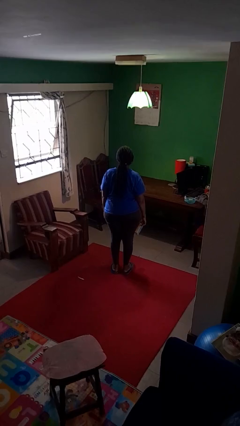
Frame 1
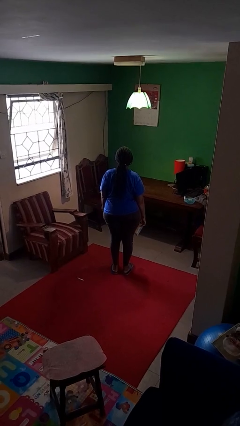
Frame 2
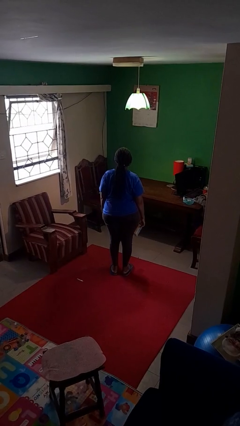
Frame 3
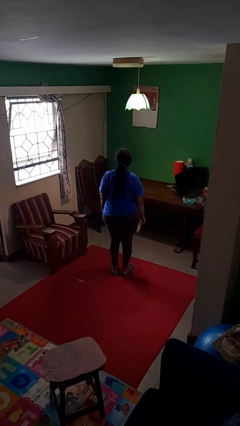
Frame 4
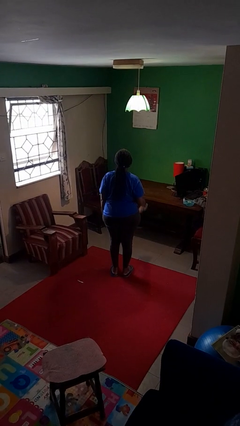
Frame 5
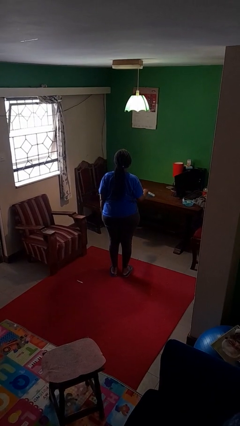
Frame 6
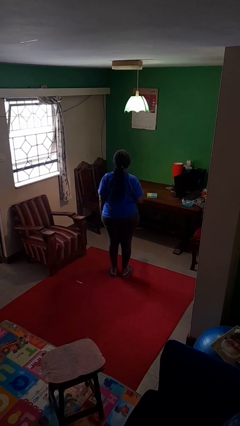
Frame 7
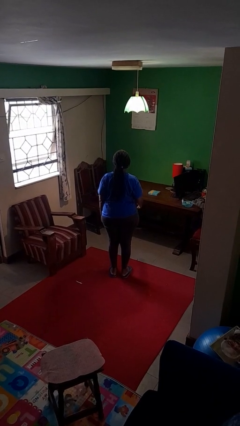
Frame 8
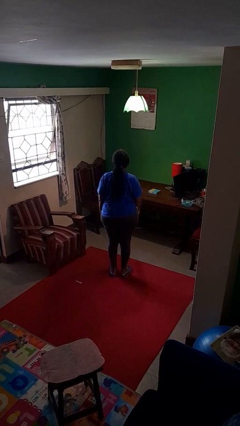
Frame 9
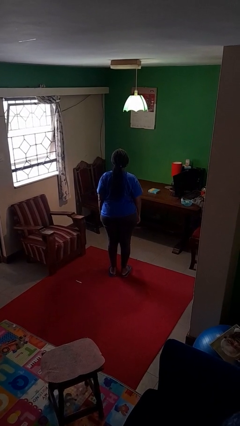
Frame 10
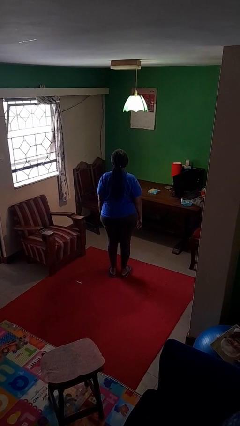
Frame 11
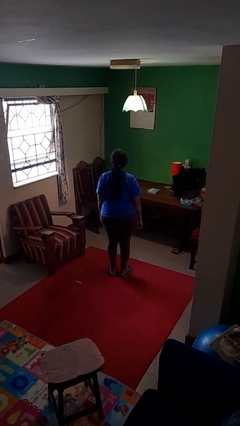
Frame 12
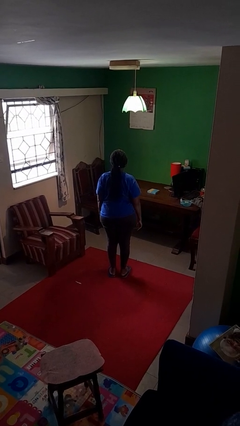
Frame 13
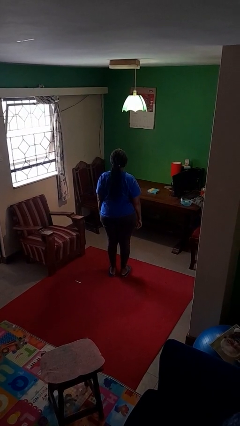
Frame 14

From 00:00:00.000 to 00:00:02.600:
person throws object on table

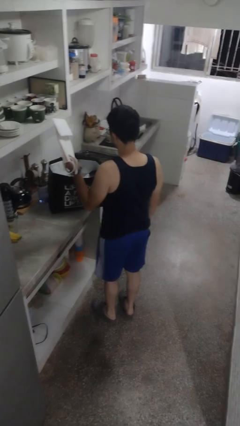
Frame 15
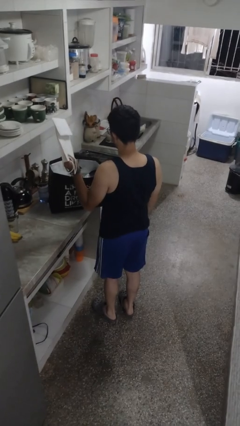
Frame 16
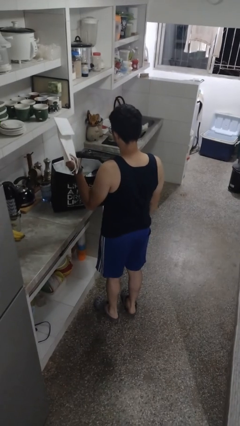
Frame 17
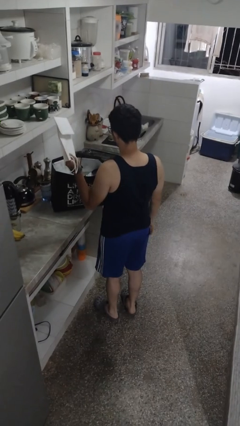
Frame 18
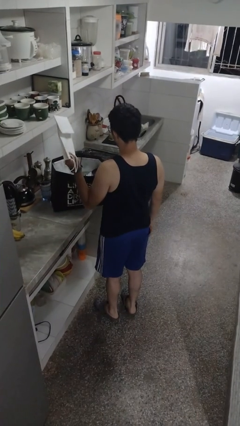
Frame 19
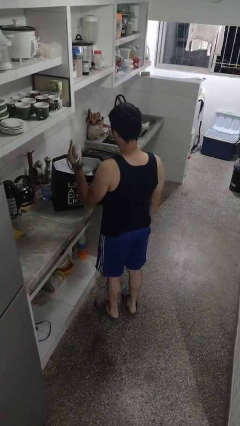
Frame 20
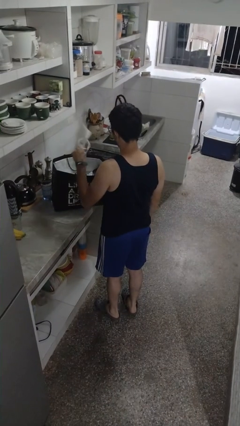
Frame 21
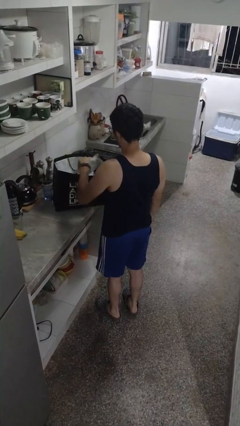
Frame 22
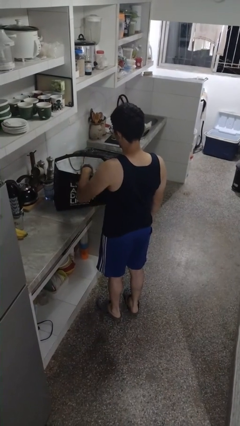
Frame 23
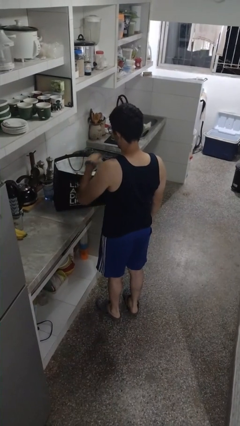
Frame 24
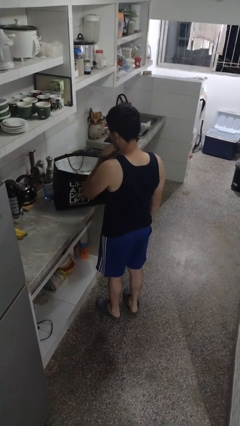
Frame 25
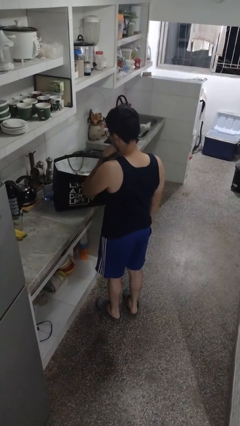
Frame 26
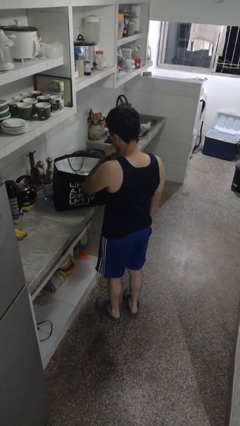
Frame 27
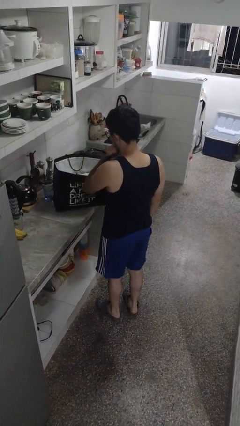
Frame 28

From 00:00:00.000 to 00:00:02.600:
person puts object into bag

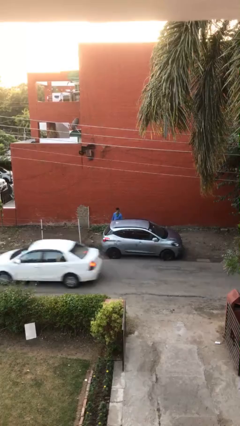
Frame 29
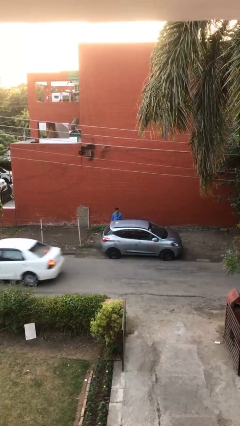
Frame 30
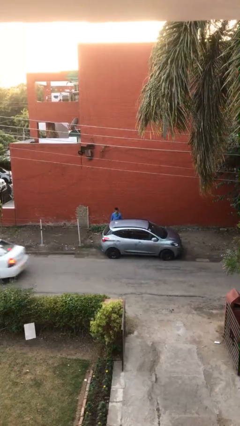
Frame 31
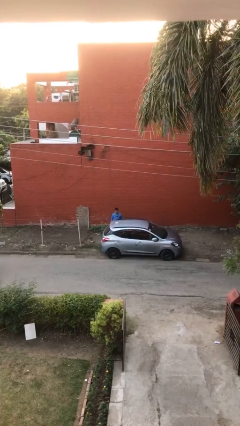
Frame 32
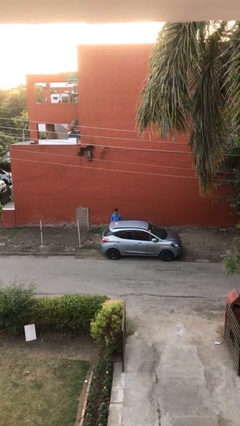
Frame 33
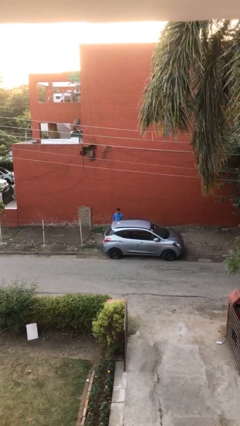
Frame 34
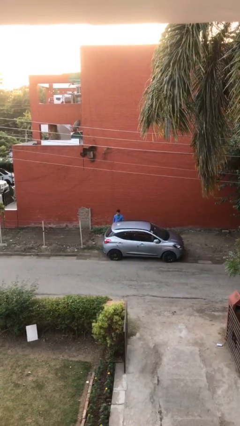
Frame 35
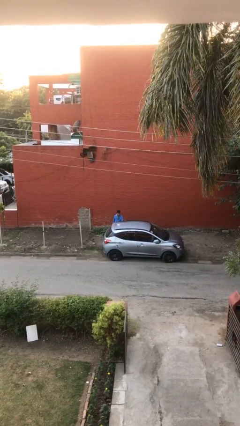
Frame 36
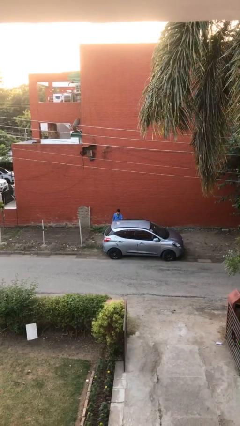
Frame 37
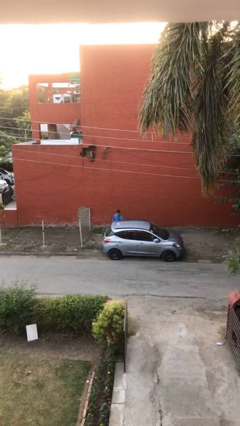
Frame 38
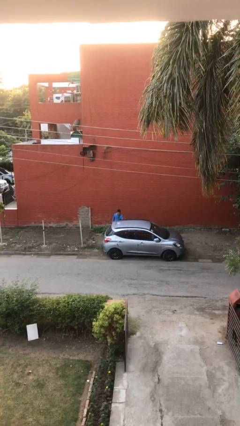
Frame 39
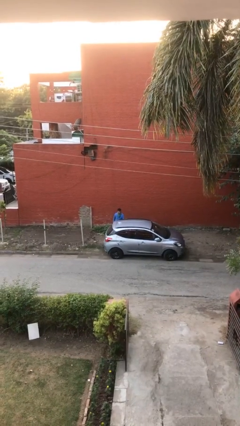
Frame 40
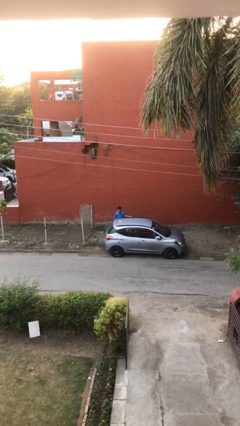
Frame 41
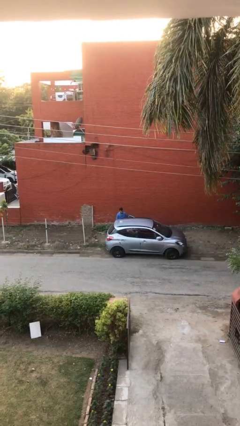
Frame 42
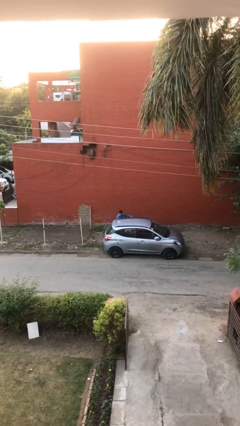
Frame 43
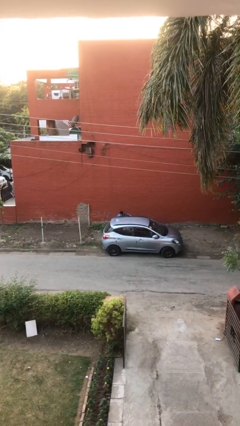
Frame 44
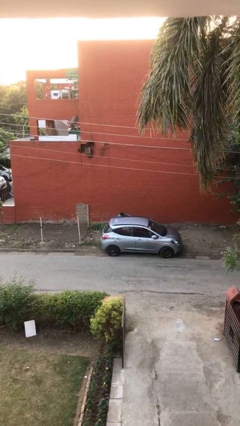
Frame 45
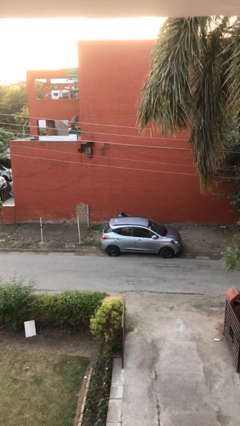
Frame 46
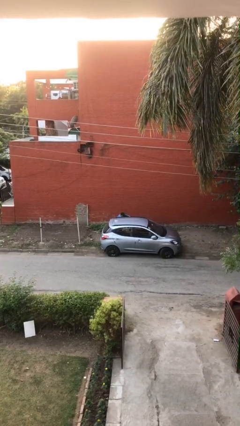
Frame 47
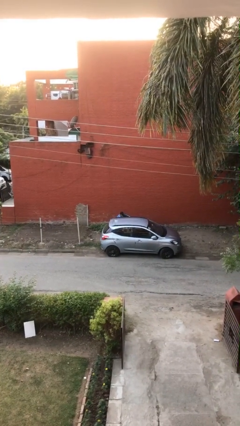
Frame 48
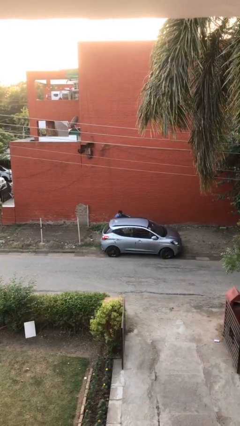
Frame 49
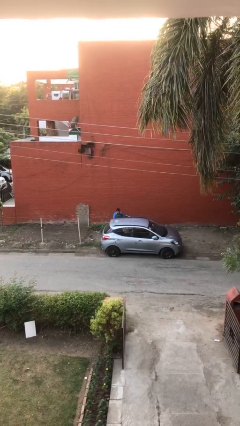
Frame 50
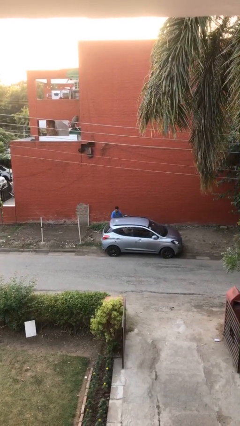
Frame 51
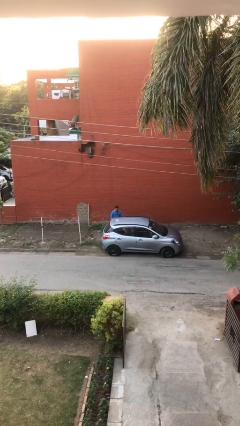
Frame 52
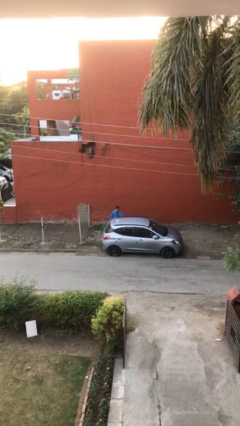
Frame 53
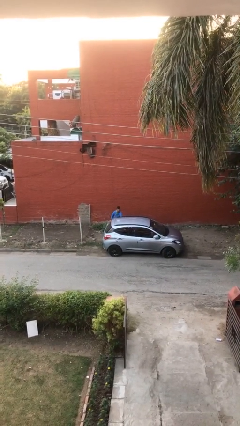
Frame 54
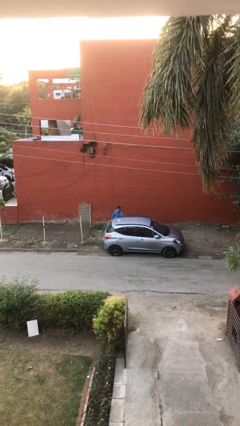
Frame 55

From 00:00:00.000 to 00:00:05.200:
person unloads car

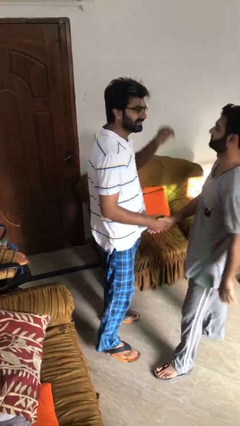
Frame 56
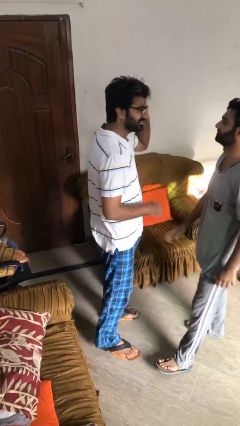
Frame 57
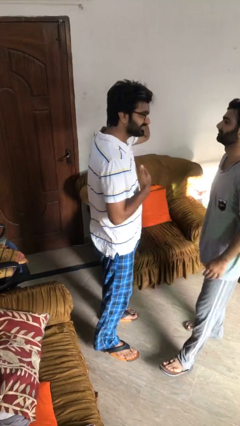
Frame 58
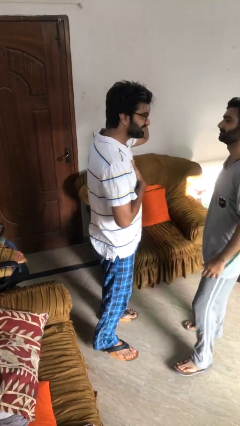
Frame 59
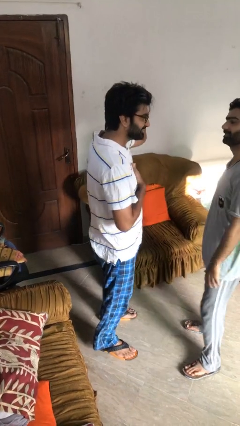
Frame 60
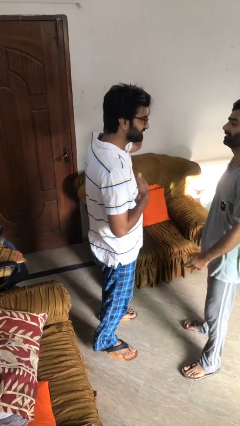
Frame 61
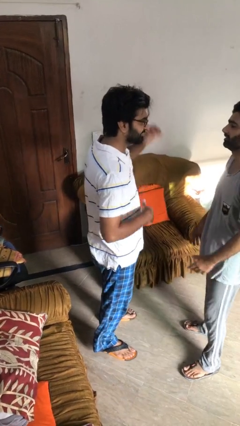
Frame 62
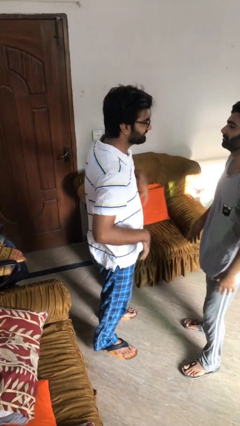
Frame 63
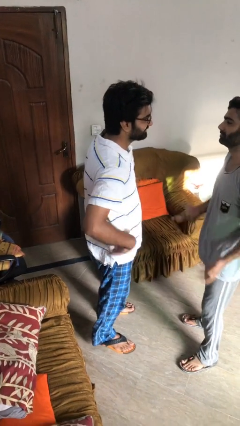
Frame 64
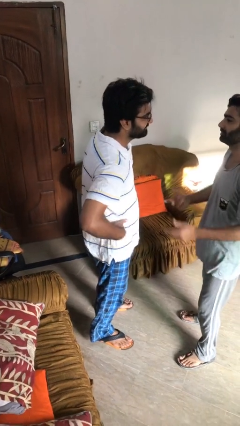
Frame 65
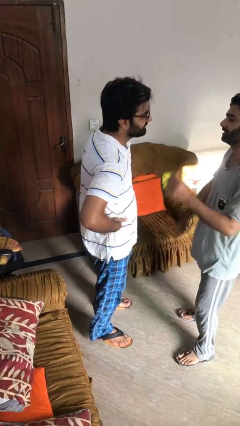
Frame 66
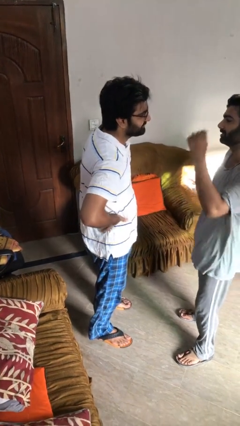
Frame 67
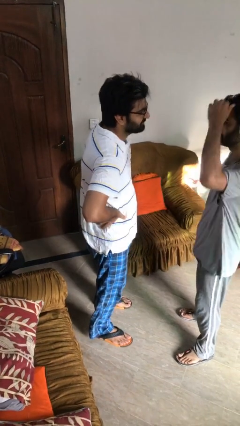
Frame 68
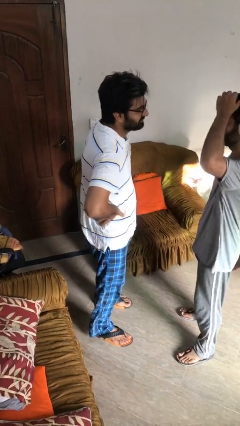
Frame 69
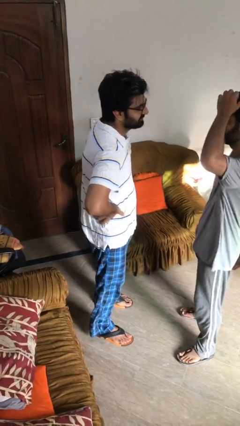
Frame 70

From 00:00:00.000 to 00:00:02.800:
person talks to person

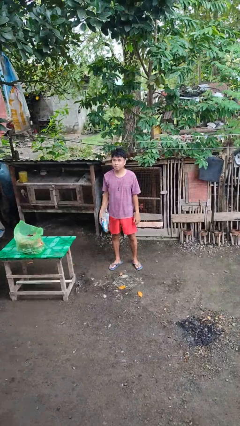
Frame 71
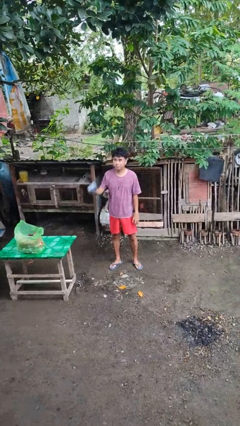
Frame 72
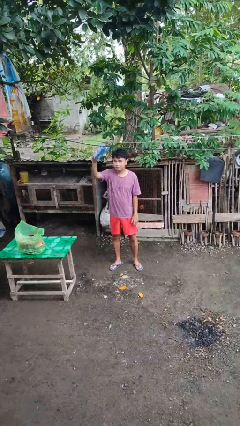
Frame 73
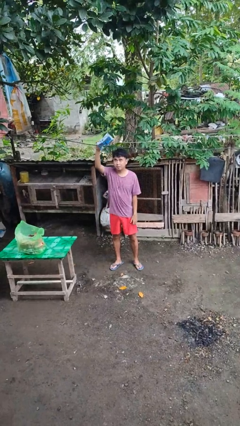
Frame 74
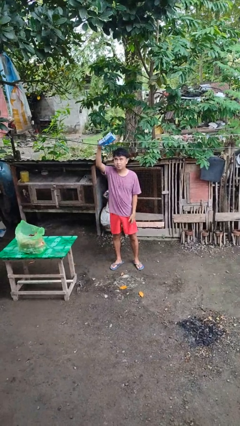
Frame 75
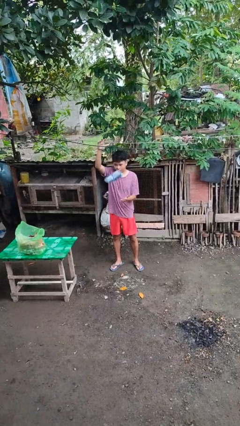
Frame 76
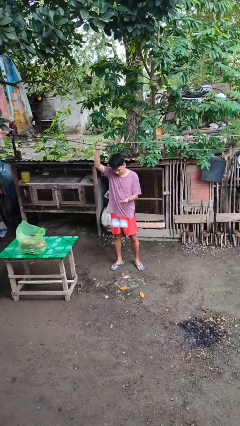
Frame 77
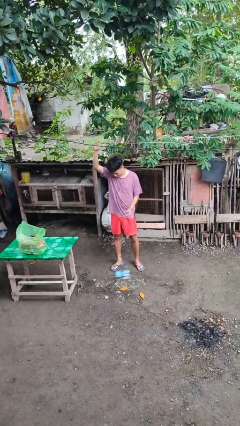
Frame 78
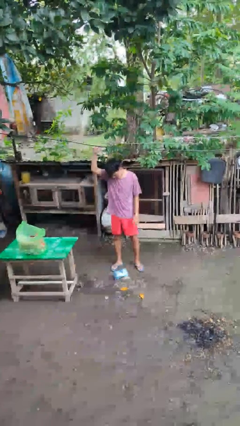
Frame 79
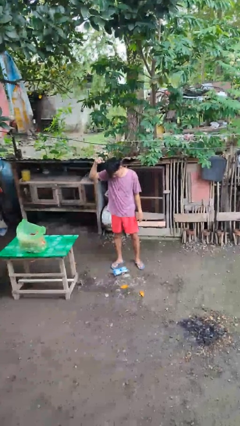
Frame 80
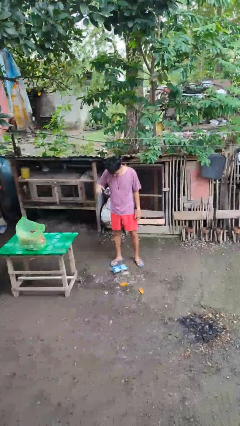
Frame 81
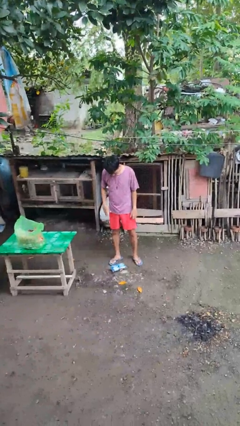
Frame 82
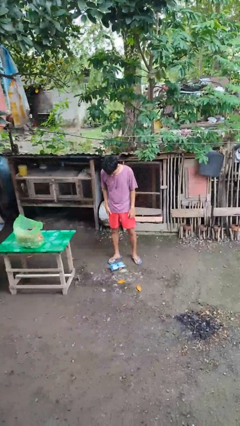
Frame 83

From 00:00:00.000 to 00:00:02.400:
person drops object

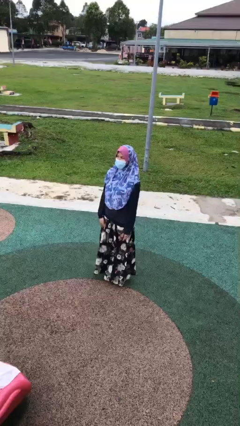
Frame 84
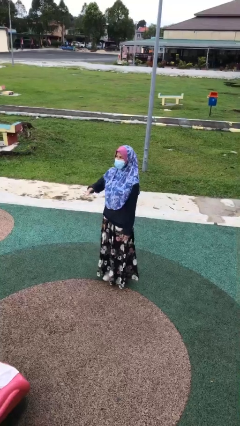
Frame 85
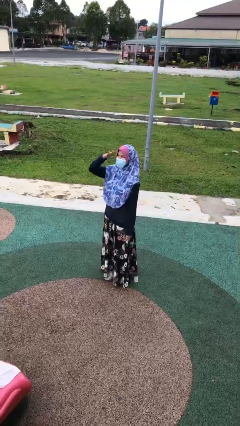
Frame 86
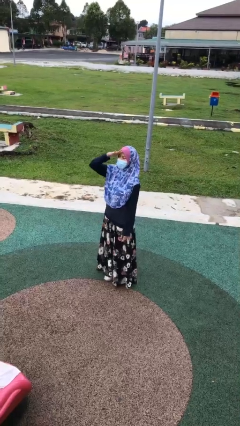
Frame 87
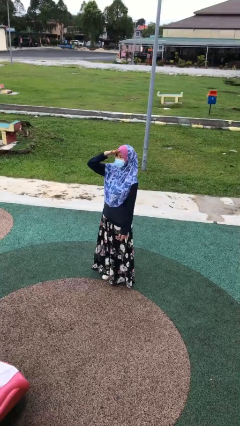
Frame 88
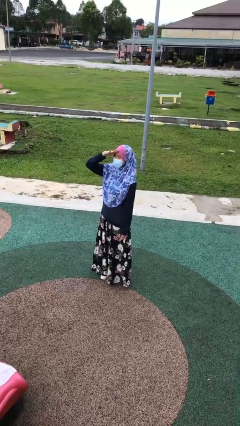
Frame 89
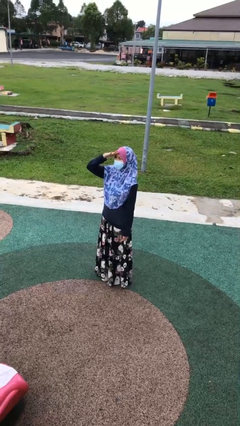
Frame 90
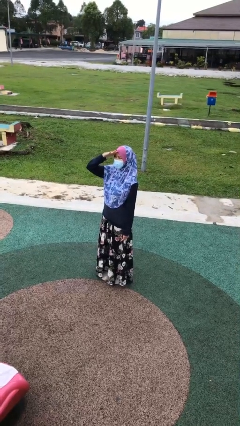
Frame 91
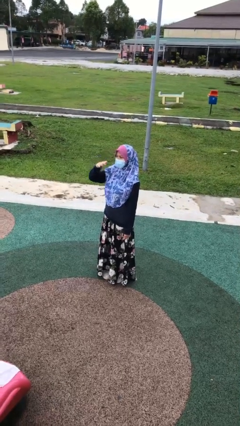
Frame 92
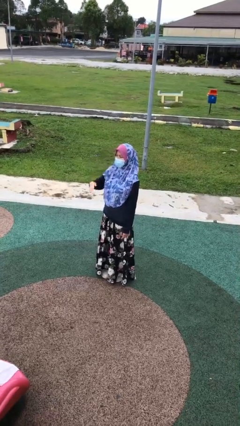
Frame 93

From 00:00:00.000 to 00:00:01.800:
person salutes
